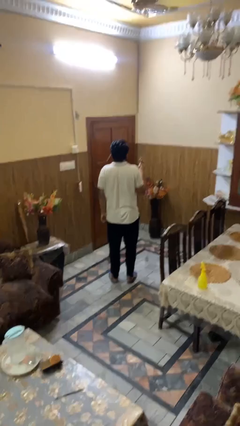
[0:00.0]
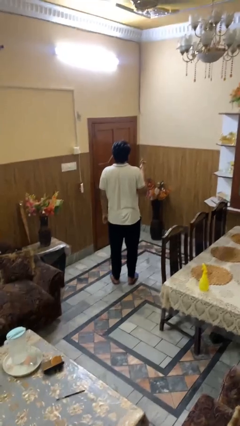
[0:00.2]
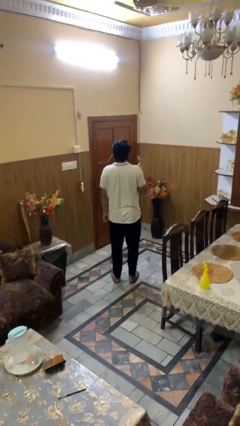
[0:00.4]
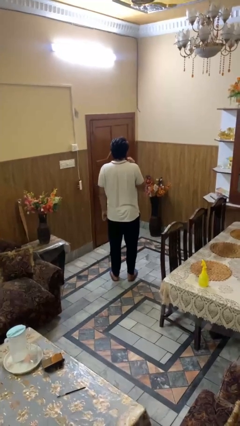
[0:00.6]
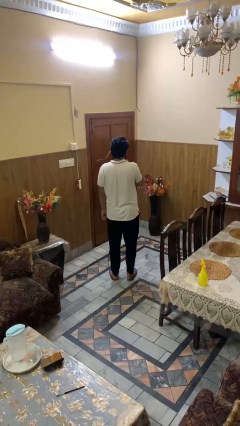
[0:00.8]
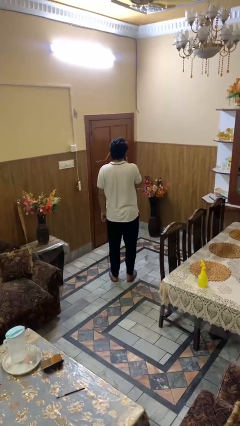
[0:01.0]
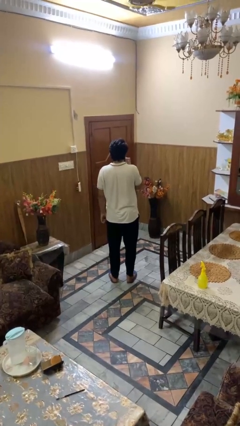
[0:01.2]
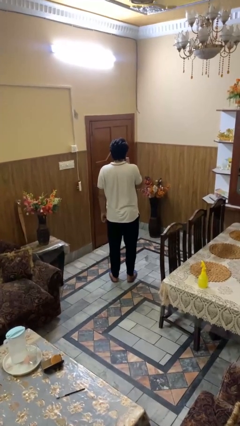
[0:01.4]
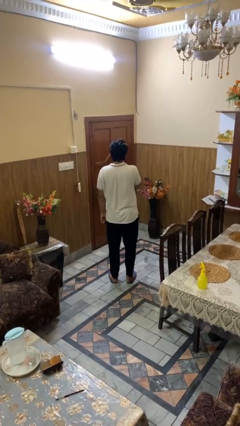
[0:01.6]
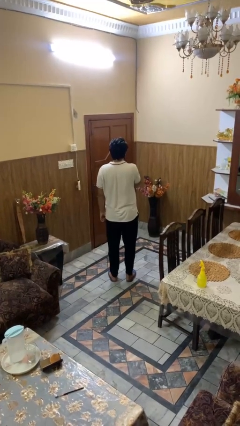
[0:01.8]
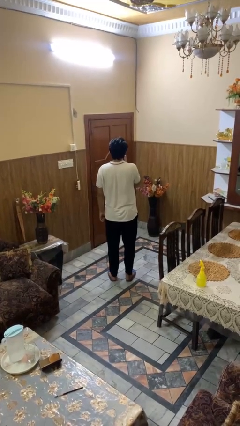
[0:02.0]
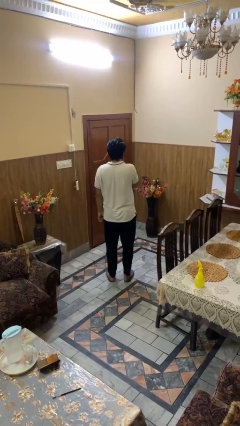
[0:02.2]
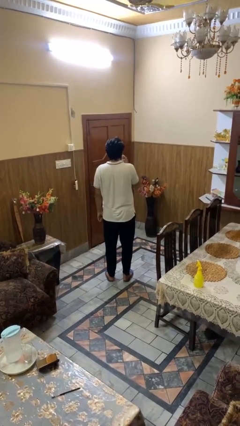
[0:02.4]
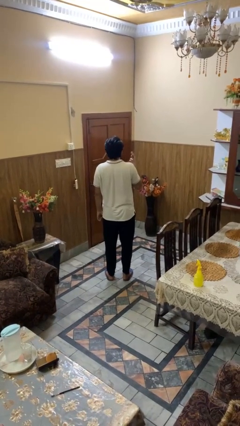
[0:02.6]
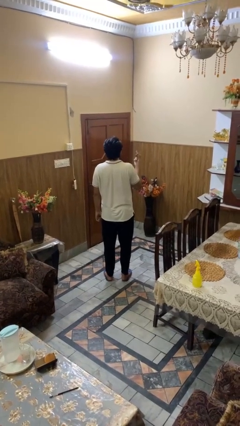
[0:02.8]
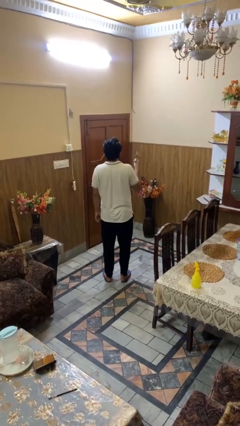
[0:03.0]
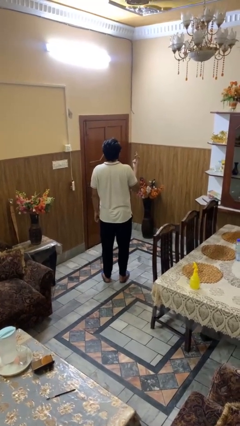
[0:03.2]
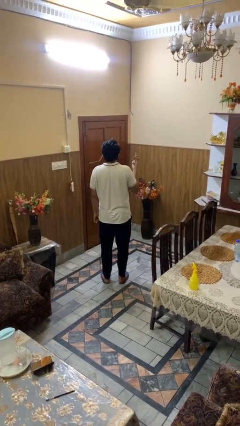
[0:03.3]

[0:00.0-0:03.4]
person applies lip makeup

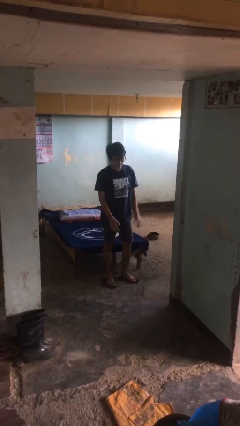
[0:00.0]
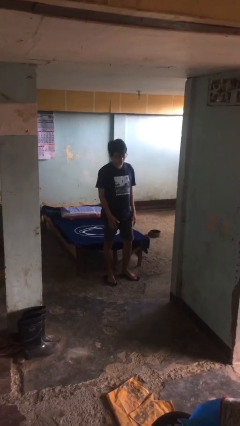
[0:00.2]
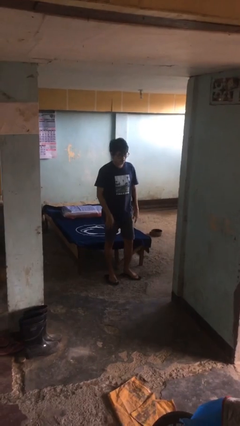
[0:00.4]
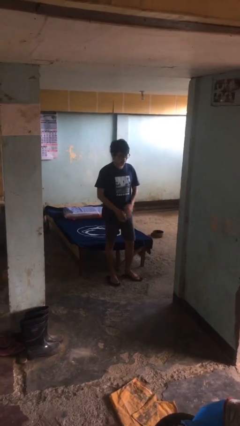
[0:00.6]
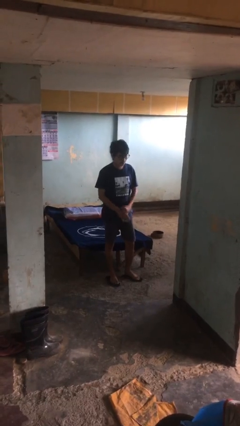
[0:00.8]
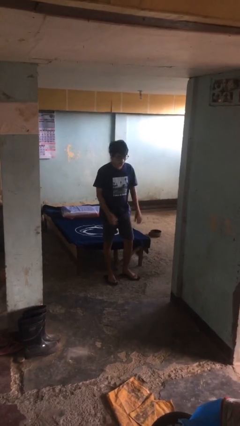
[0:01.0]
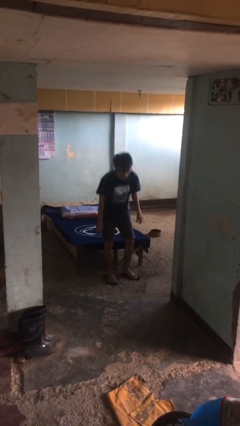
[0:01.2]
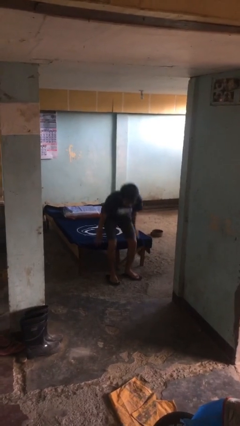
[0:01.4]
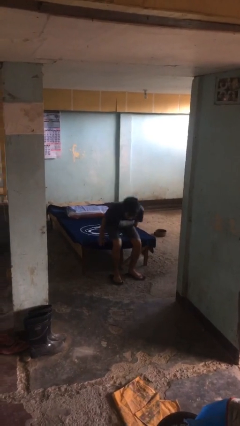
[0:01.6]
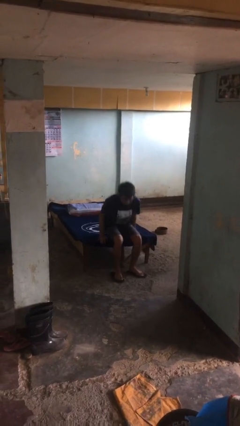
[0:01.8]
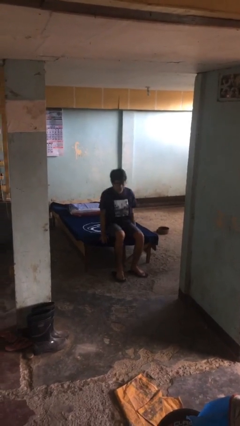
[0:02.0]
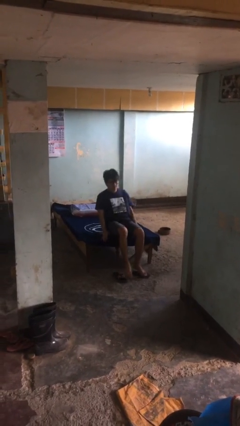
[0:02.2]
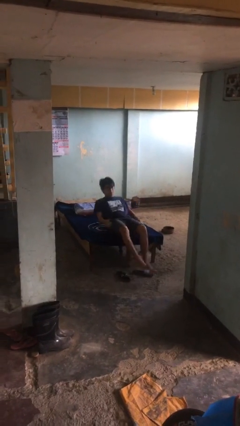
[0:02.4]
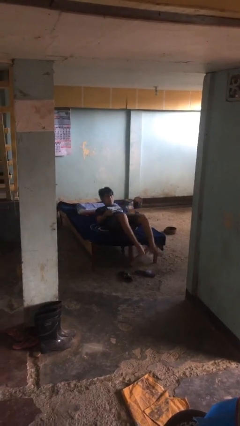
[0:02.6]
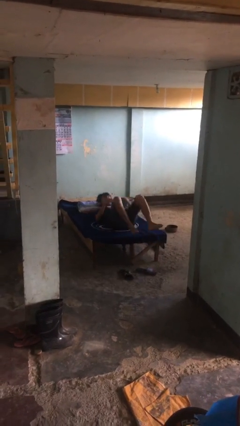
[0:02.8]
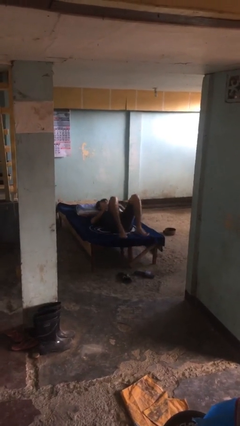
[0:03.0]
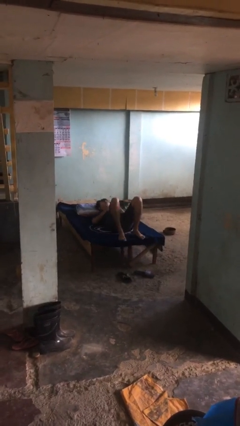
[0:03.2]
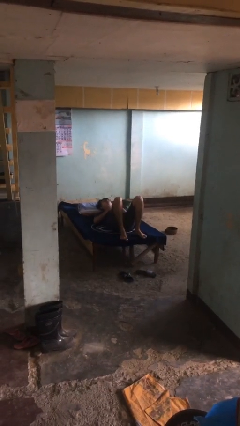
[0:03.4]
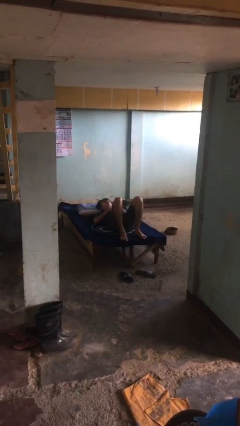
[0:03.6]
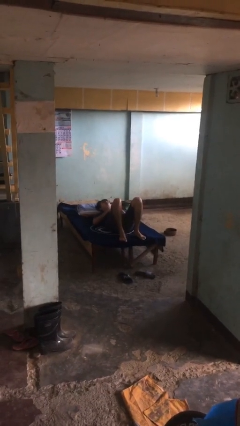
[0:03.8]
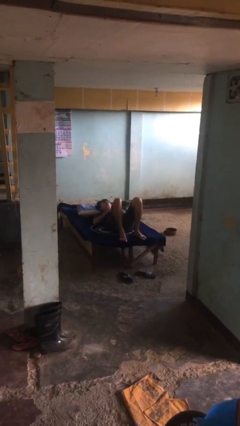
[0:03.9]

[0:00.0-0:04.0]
person lies down on bed

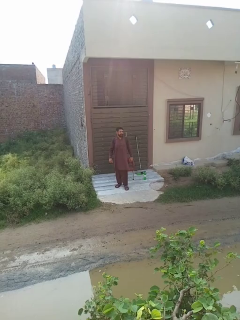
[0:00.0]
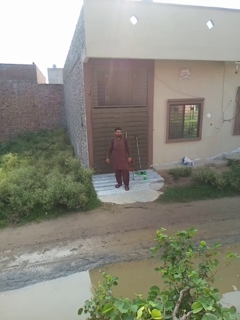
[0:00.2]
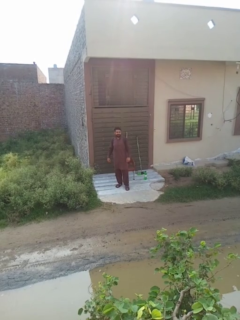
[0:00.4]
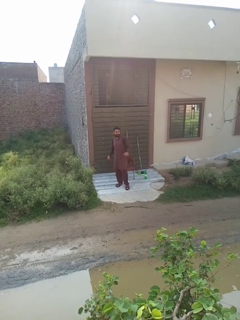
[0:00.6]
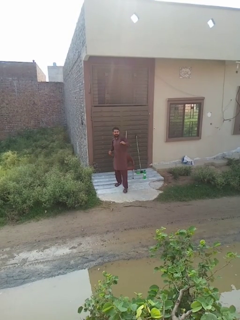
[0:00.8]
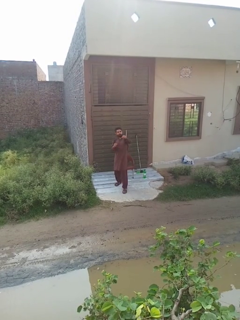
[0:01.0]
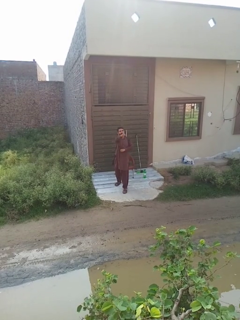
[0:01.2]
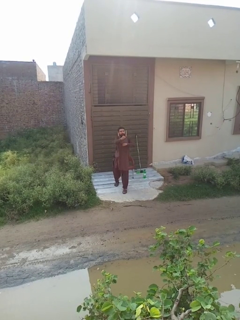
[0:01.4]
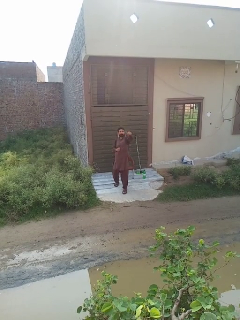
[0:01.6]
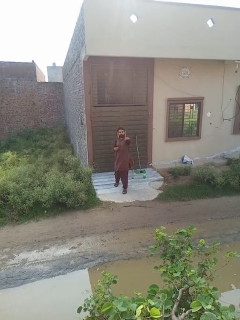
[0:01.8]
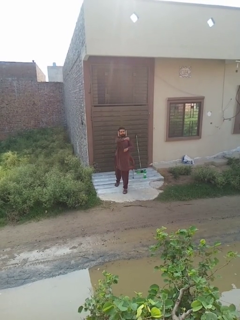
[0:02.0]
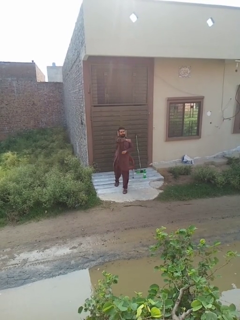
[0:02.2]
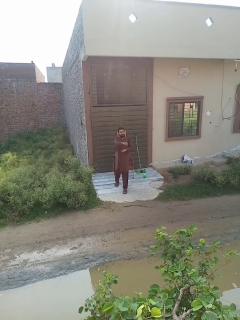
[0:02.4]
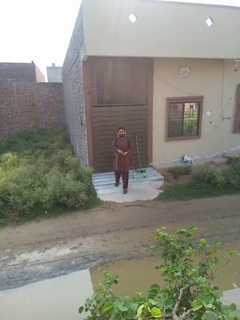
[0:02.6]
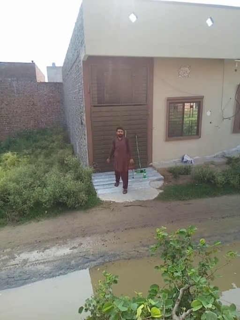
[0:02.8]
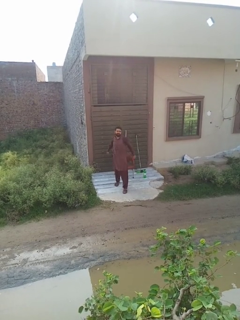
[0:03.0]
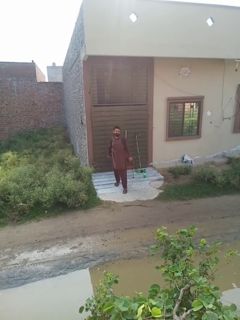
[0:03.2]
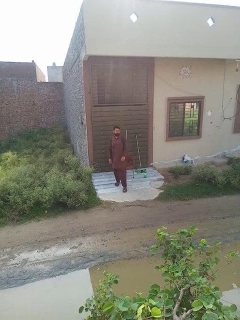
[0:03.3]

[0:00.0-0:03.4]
person punches

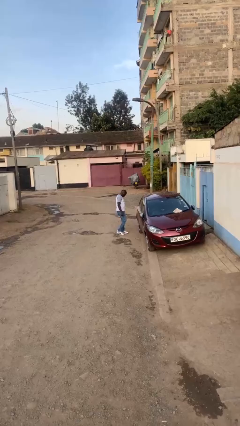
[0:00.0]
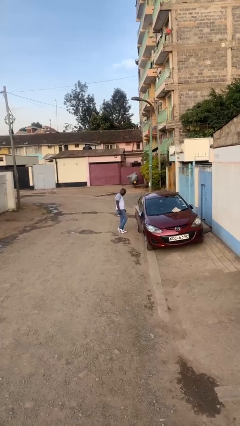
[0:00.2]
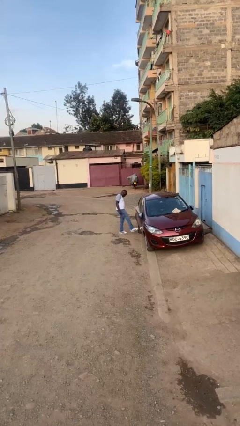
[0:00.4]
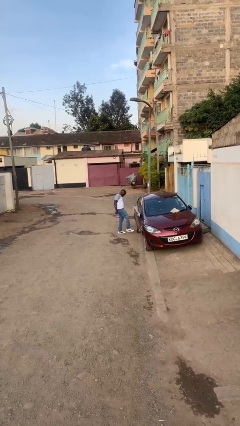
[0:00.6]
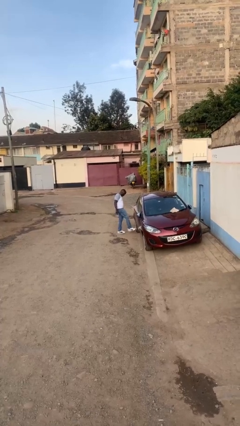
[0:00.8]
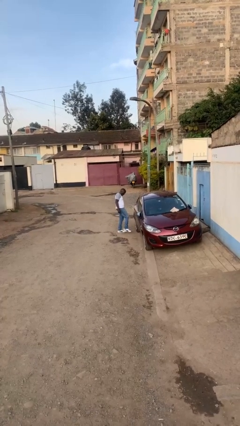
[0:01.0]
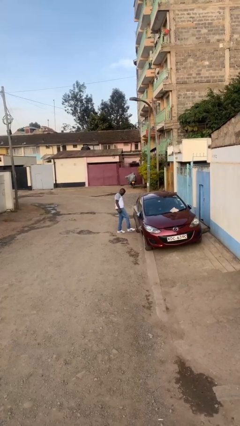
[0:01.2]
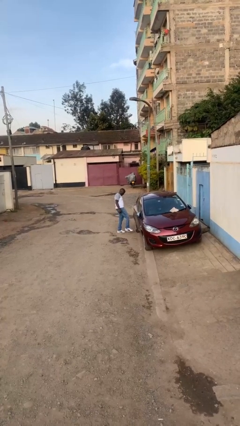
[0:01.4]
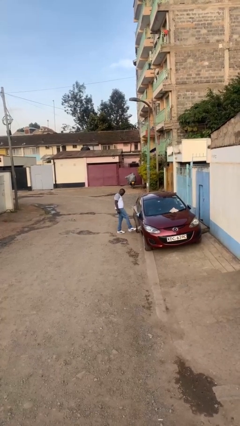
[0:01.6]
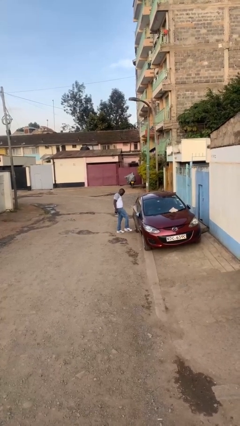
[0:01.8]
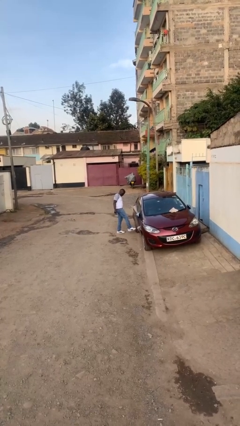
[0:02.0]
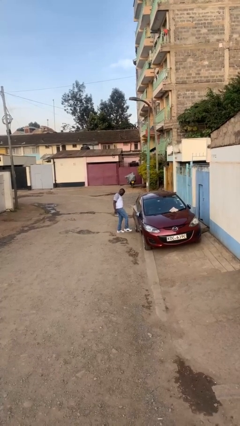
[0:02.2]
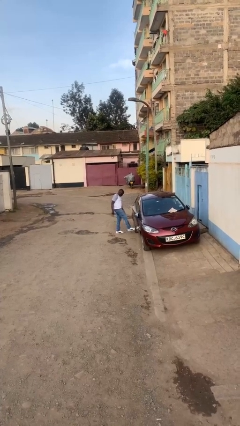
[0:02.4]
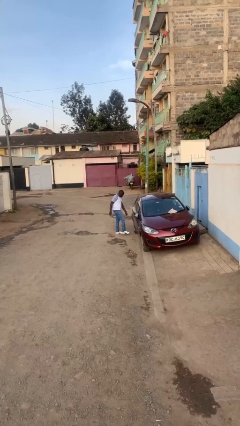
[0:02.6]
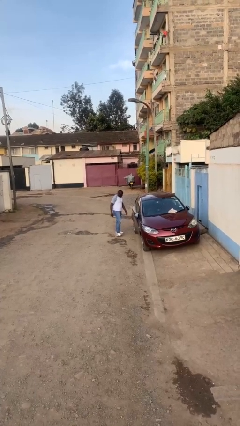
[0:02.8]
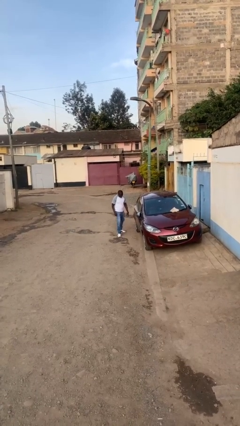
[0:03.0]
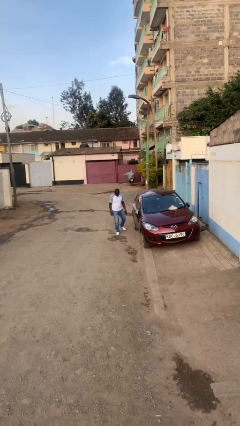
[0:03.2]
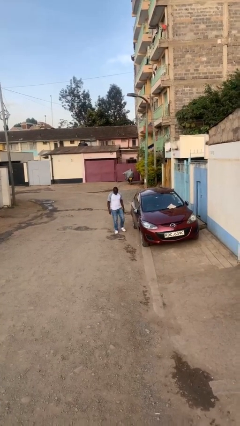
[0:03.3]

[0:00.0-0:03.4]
person kicks car tires

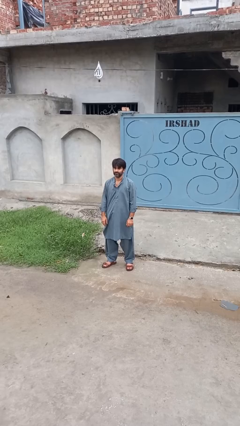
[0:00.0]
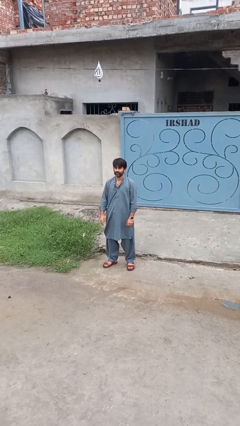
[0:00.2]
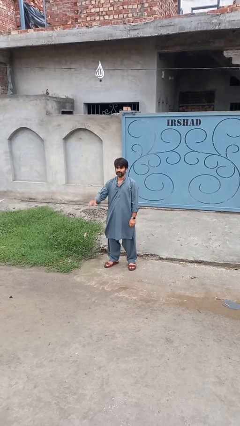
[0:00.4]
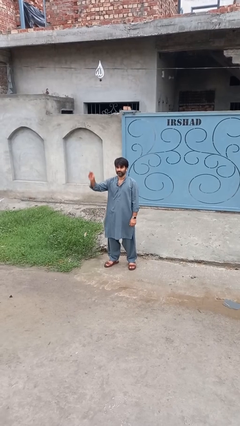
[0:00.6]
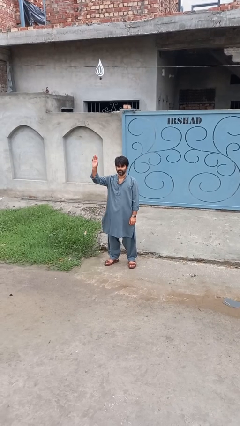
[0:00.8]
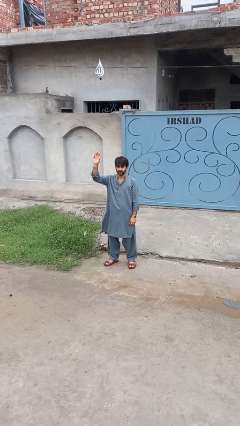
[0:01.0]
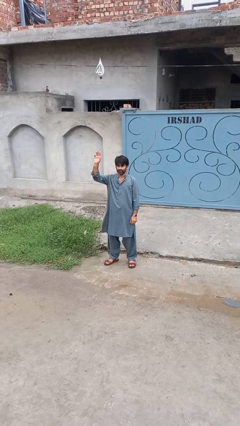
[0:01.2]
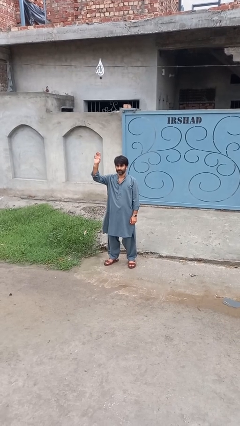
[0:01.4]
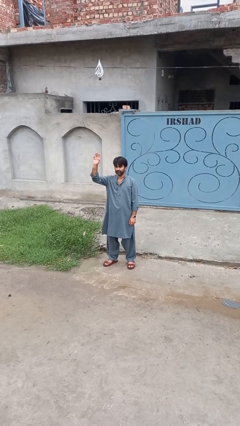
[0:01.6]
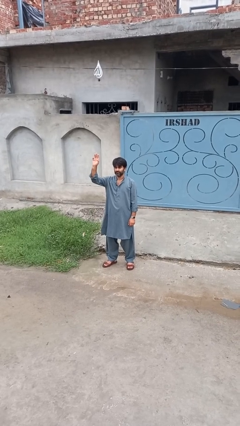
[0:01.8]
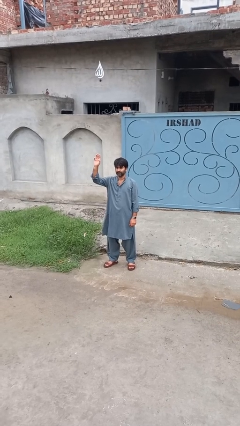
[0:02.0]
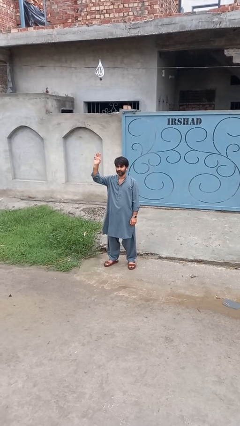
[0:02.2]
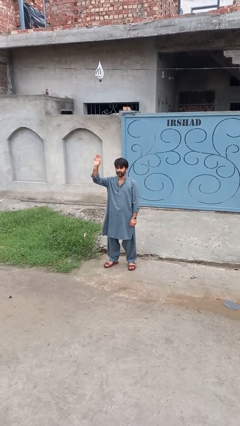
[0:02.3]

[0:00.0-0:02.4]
person gestures raise hand

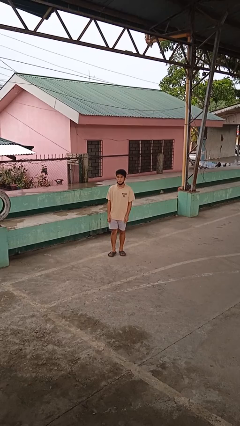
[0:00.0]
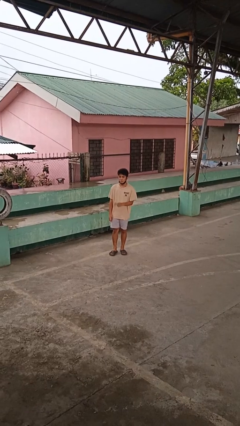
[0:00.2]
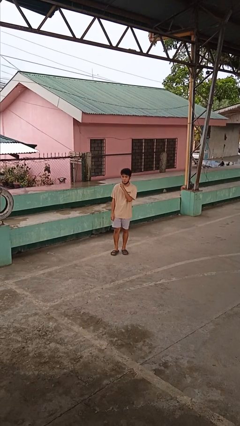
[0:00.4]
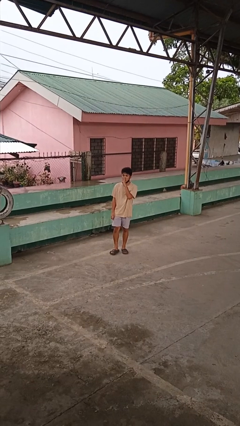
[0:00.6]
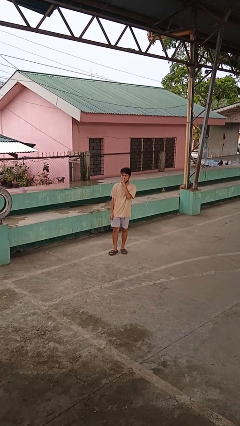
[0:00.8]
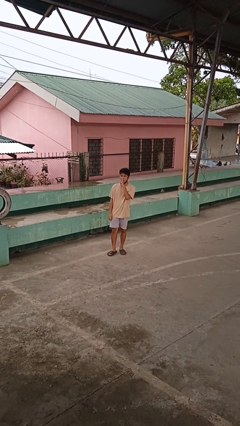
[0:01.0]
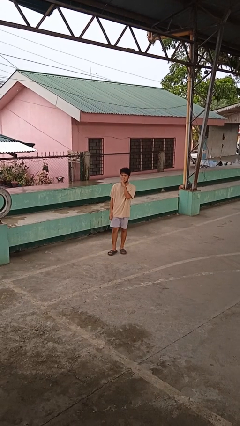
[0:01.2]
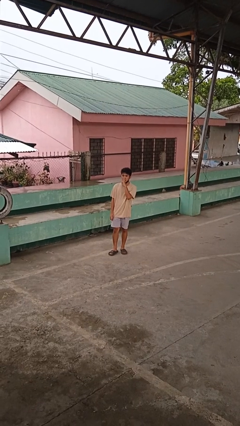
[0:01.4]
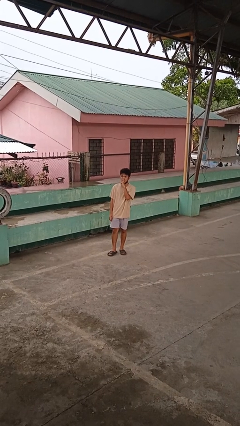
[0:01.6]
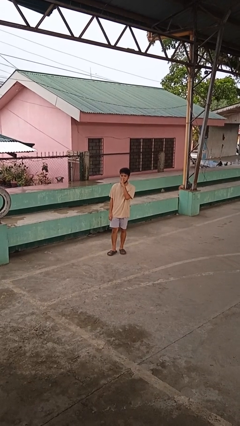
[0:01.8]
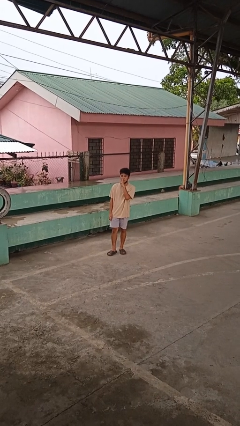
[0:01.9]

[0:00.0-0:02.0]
person gestures be quiet
